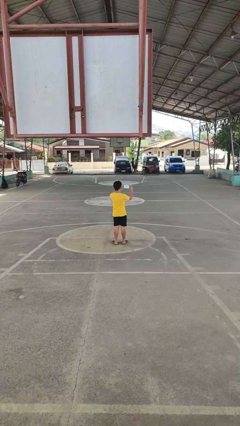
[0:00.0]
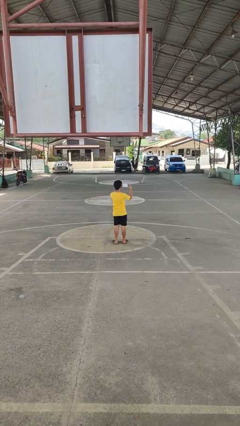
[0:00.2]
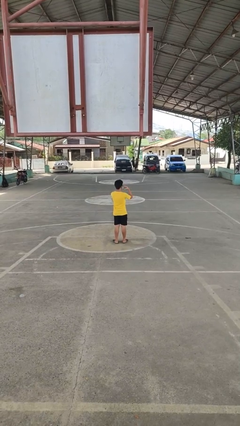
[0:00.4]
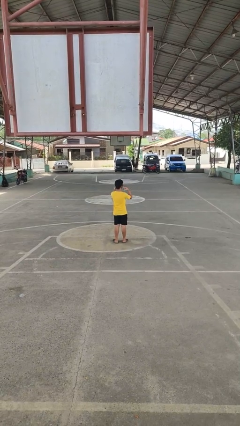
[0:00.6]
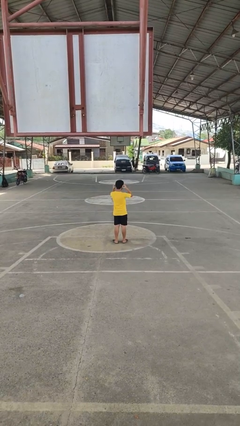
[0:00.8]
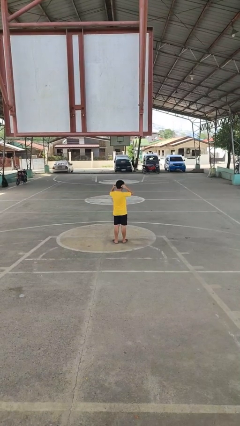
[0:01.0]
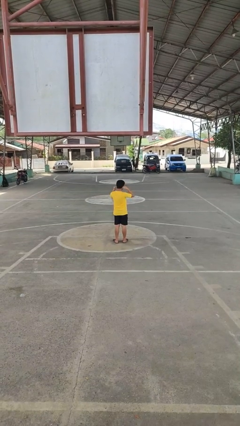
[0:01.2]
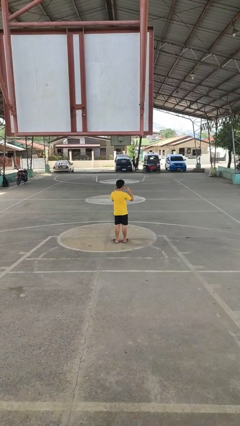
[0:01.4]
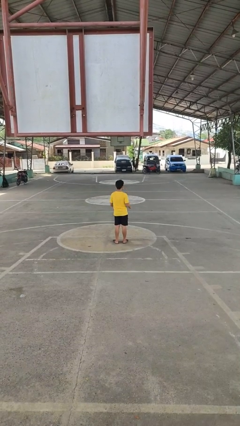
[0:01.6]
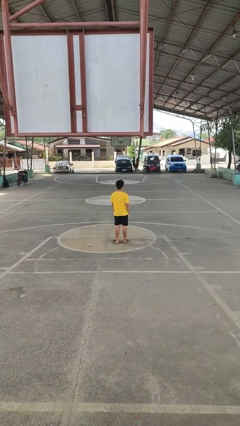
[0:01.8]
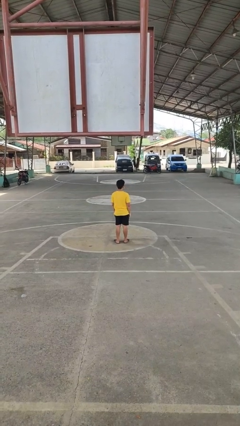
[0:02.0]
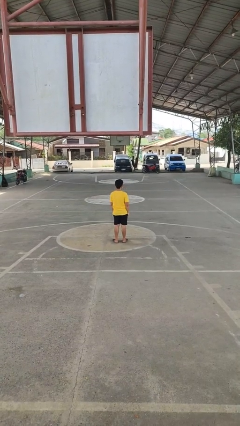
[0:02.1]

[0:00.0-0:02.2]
person puts on facemask

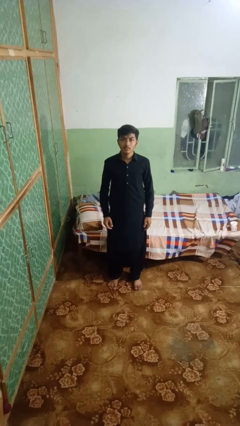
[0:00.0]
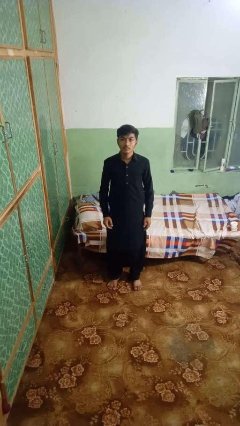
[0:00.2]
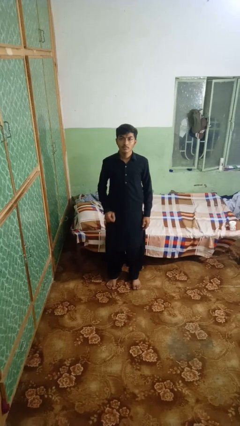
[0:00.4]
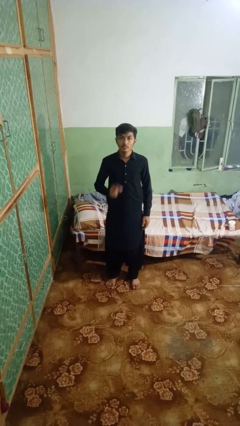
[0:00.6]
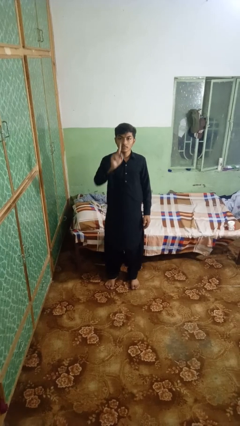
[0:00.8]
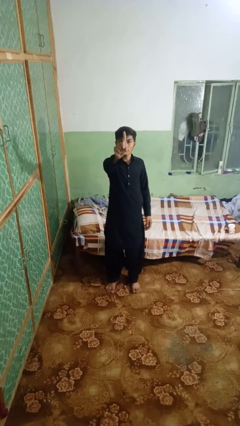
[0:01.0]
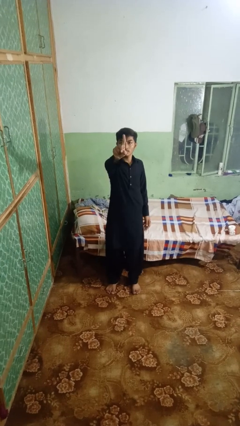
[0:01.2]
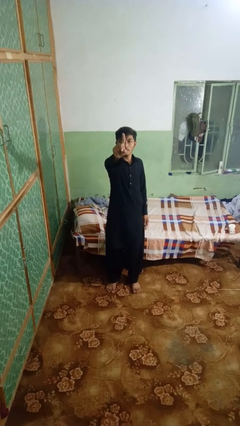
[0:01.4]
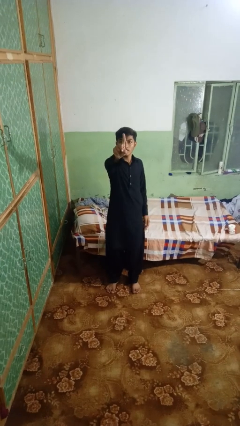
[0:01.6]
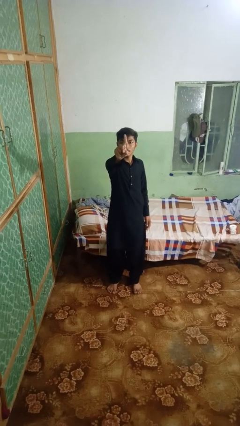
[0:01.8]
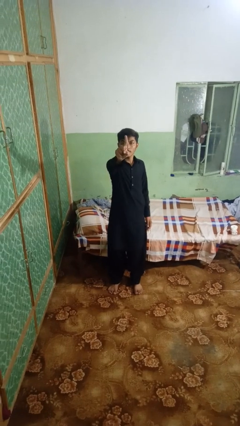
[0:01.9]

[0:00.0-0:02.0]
person gestures number one

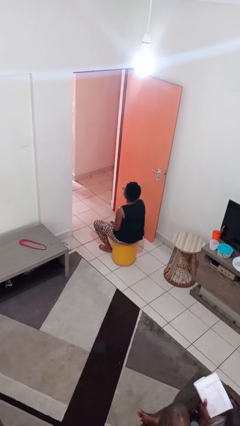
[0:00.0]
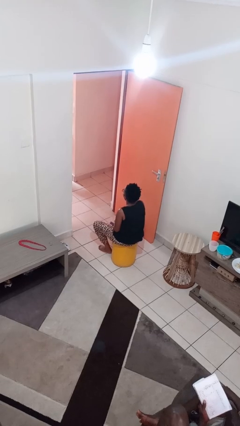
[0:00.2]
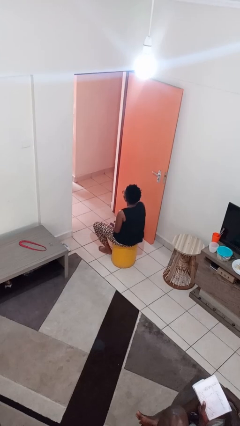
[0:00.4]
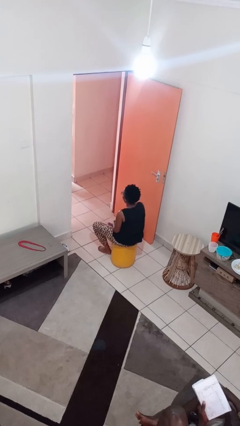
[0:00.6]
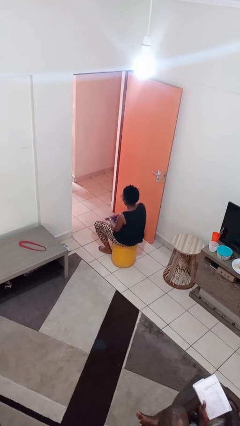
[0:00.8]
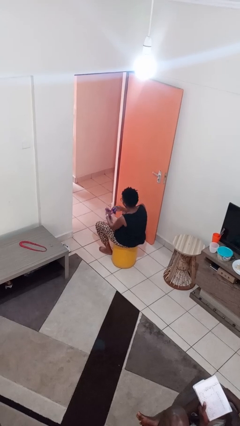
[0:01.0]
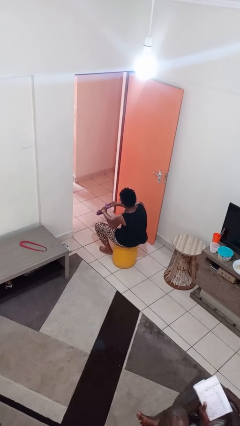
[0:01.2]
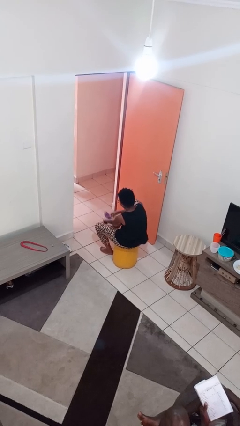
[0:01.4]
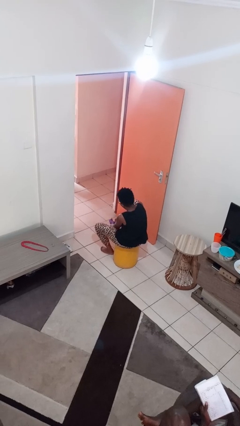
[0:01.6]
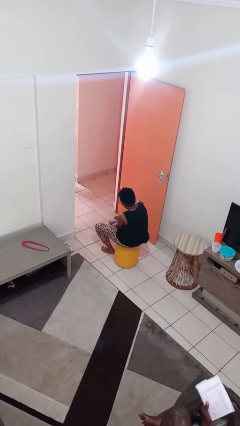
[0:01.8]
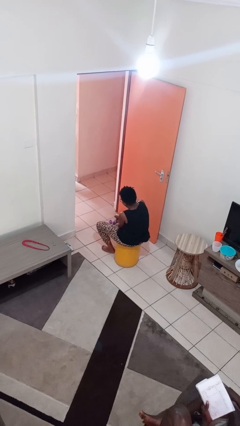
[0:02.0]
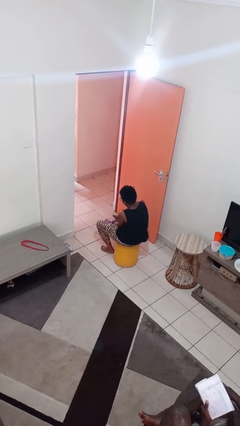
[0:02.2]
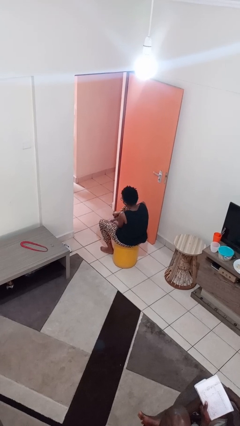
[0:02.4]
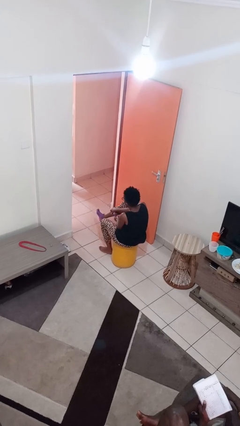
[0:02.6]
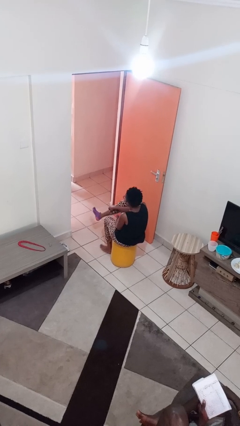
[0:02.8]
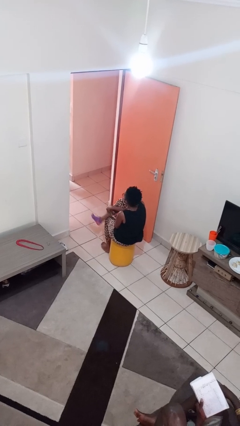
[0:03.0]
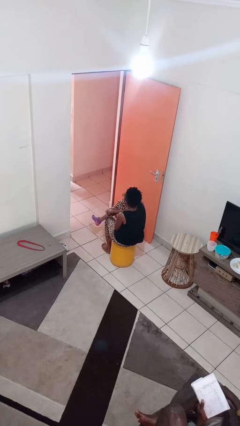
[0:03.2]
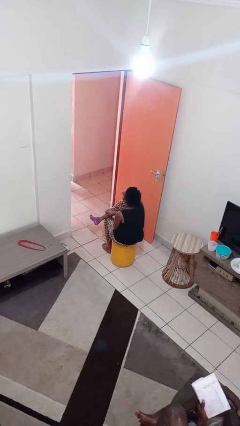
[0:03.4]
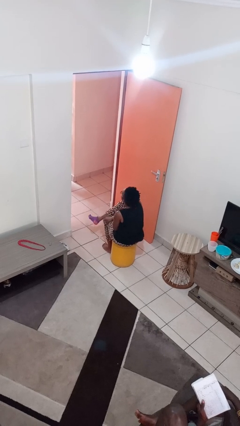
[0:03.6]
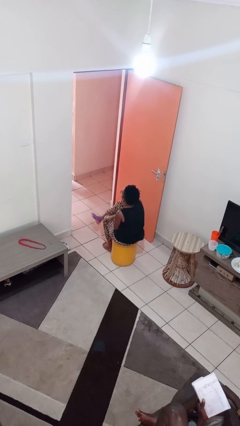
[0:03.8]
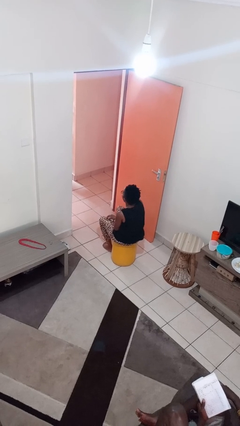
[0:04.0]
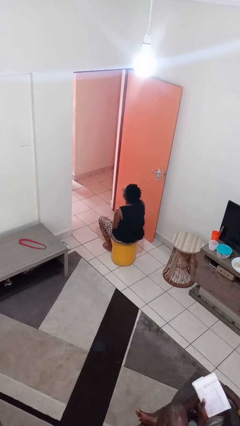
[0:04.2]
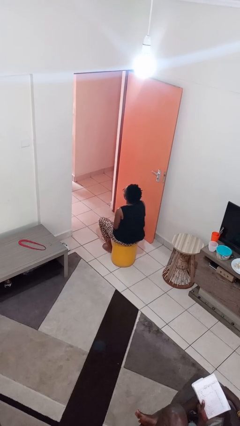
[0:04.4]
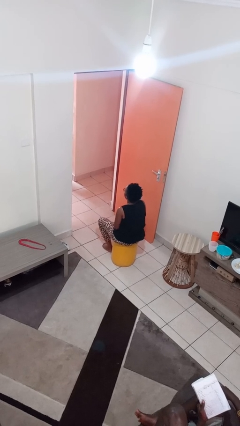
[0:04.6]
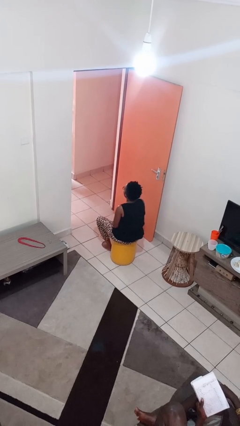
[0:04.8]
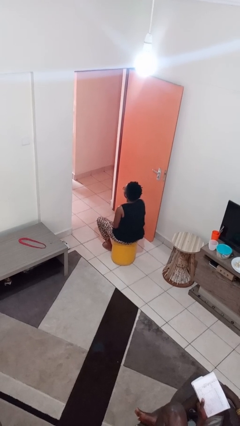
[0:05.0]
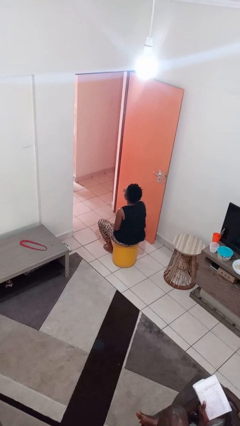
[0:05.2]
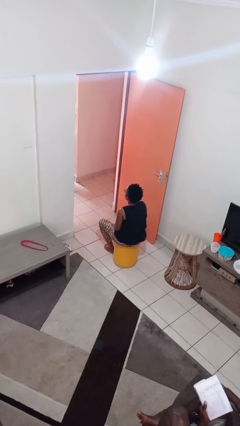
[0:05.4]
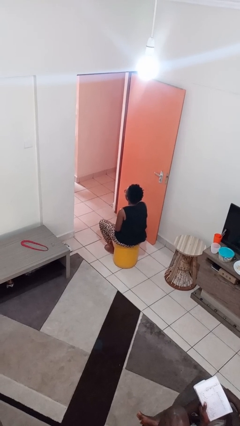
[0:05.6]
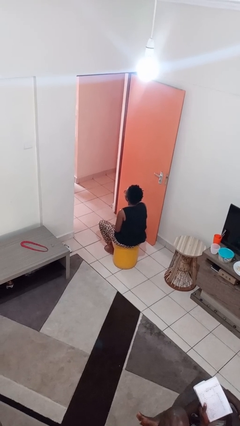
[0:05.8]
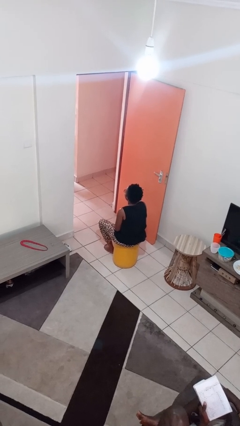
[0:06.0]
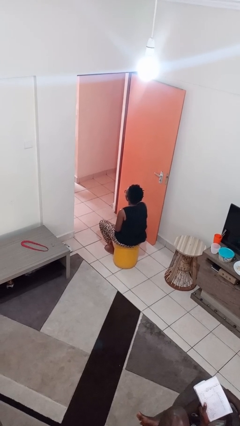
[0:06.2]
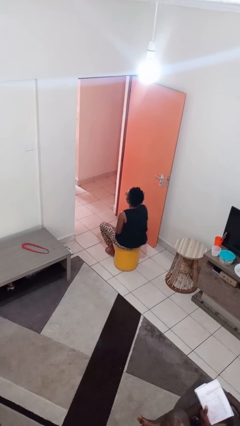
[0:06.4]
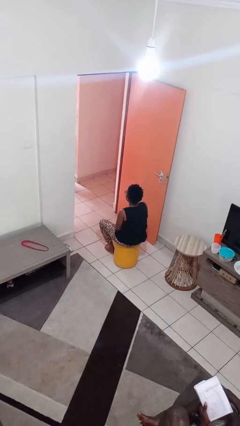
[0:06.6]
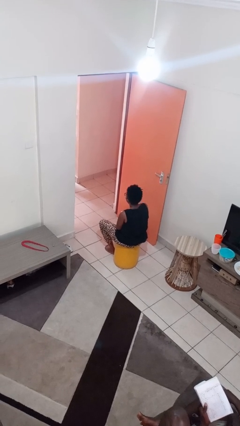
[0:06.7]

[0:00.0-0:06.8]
person puts on socks

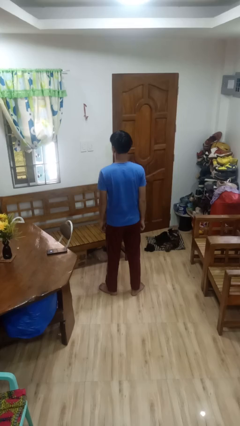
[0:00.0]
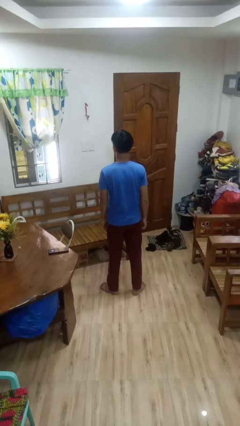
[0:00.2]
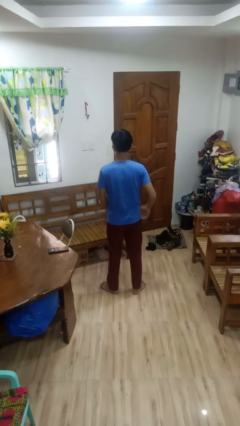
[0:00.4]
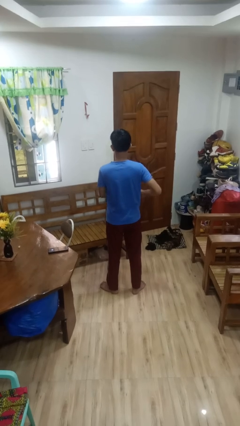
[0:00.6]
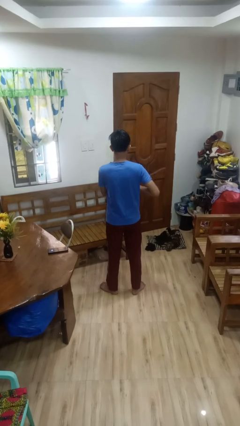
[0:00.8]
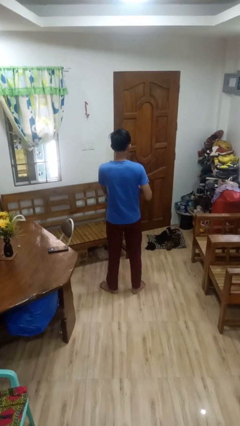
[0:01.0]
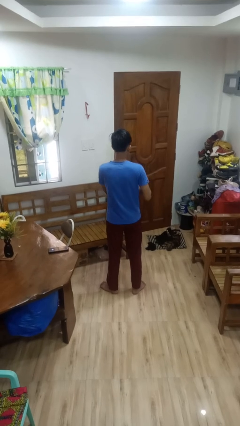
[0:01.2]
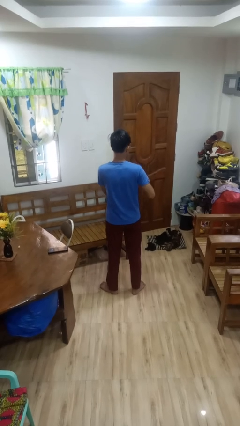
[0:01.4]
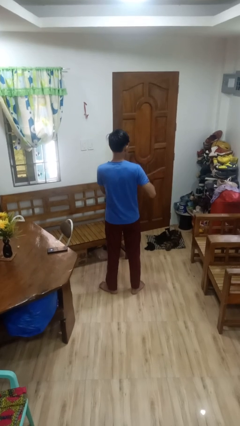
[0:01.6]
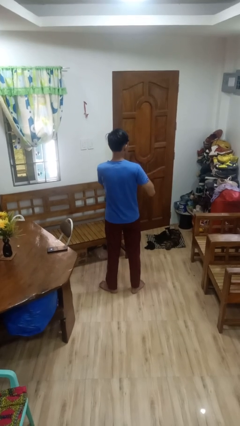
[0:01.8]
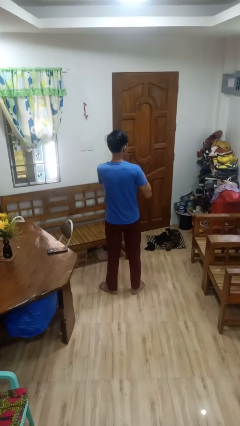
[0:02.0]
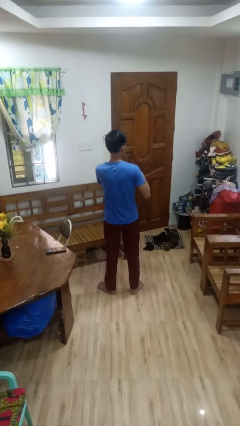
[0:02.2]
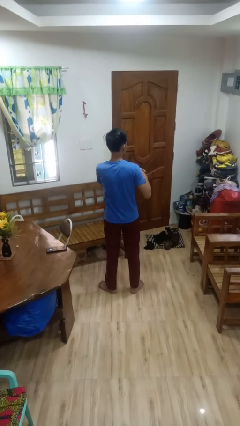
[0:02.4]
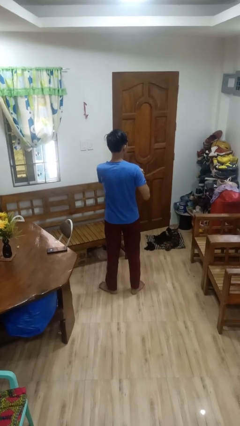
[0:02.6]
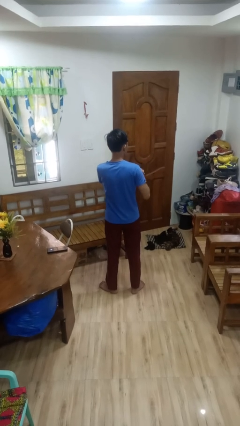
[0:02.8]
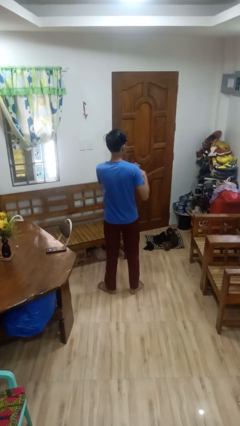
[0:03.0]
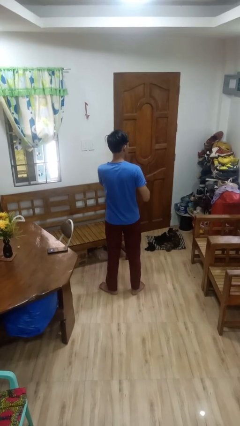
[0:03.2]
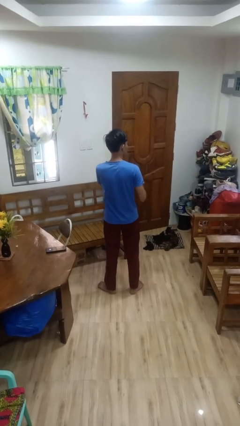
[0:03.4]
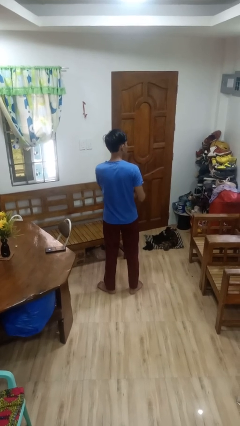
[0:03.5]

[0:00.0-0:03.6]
person cracks knuckles

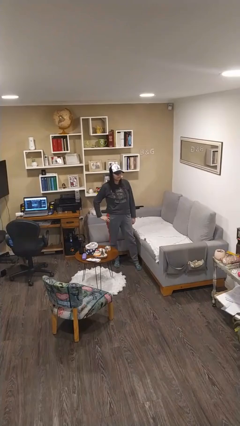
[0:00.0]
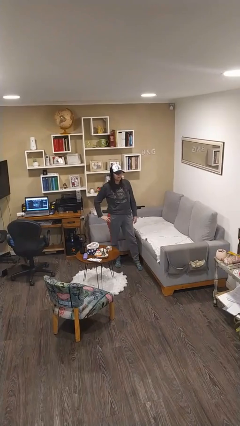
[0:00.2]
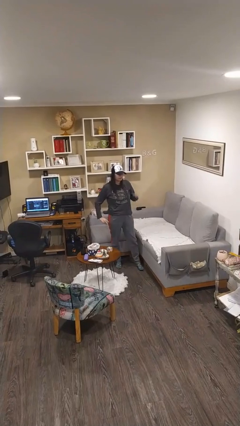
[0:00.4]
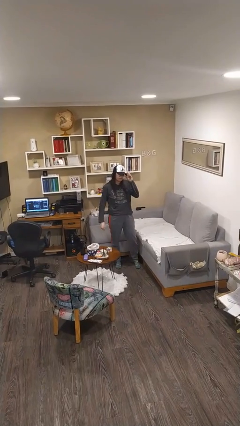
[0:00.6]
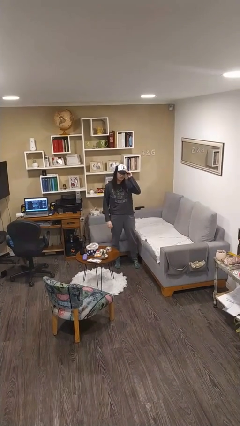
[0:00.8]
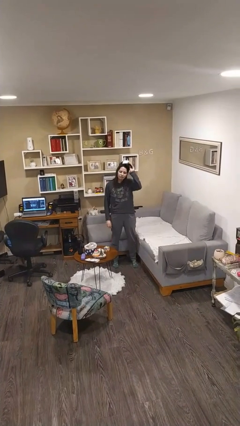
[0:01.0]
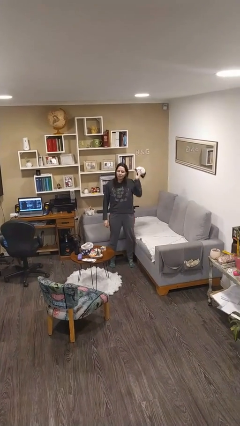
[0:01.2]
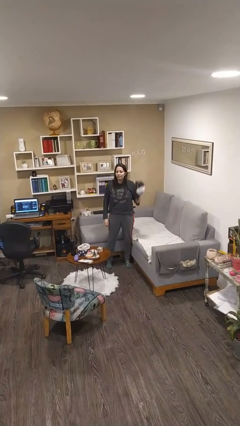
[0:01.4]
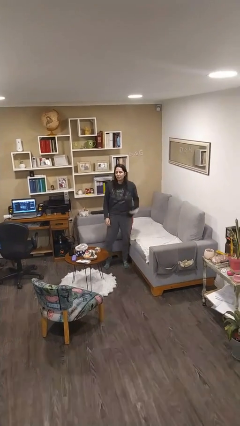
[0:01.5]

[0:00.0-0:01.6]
person takes off hat

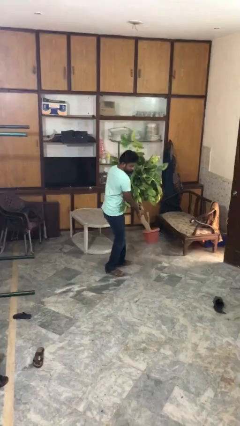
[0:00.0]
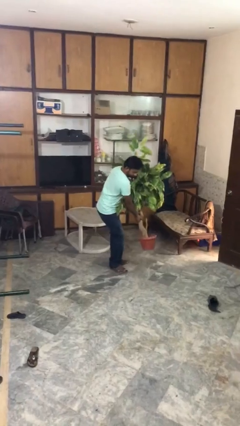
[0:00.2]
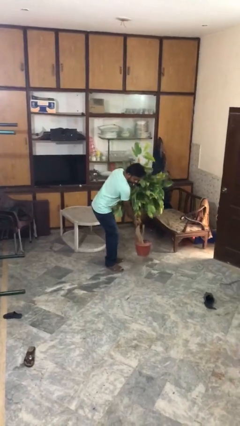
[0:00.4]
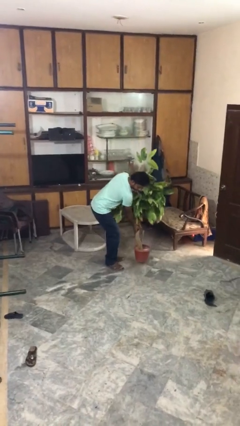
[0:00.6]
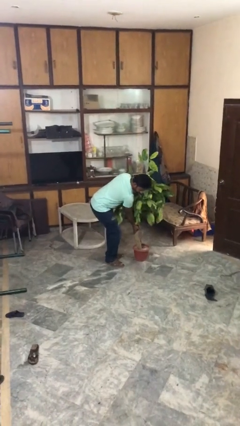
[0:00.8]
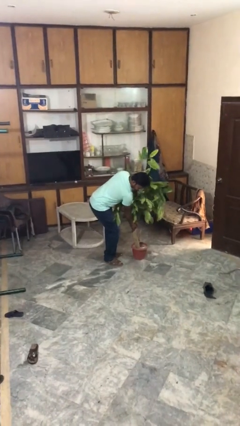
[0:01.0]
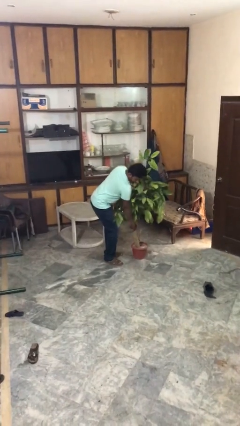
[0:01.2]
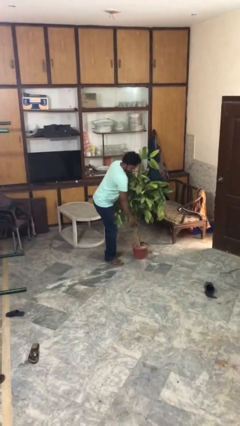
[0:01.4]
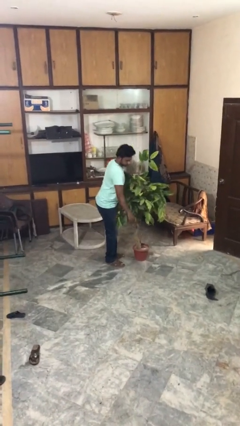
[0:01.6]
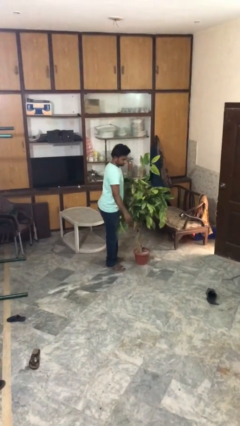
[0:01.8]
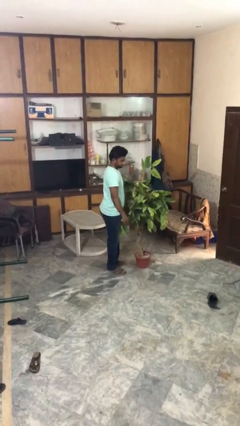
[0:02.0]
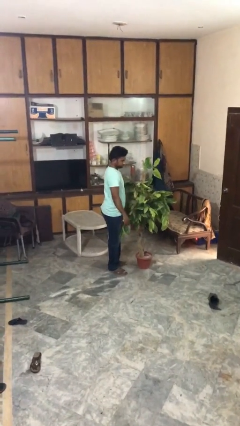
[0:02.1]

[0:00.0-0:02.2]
person puts down object on floor
